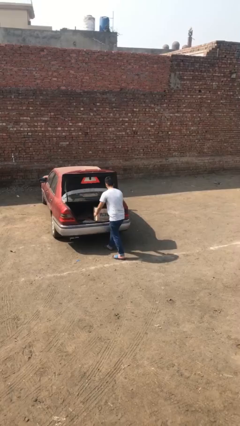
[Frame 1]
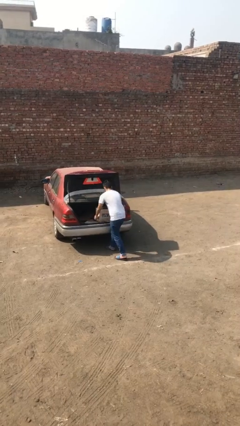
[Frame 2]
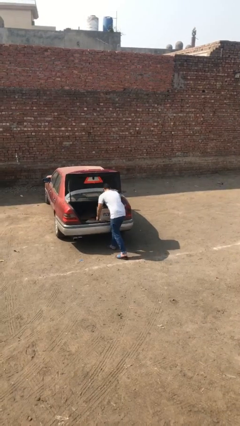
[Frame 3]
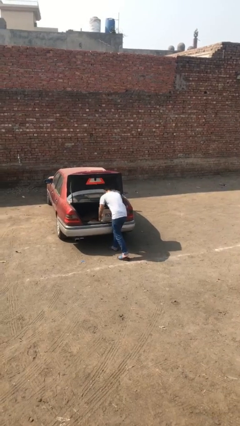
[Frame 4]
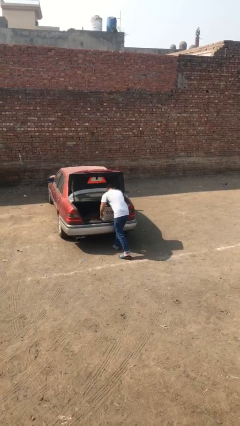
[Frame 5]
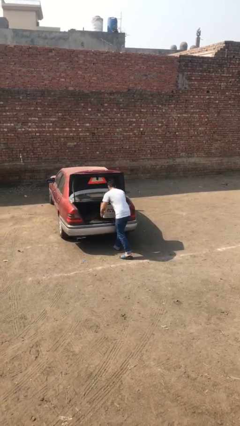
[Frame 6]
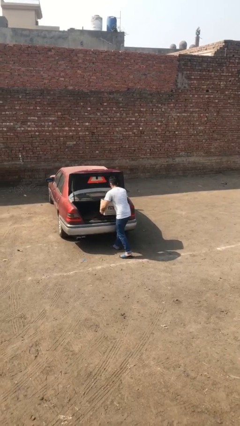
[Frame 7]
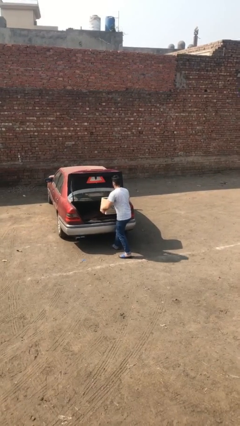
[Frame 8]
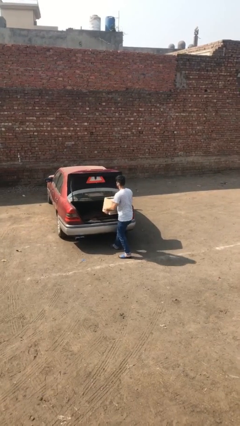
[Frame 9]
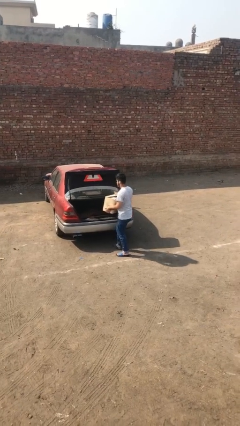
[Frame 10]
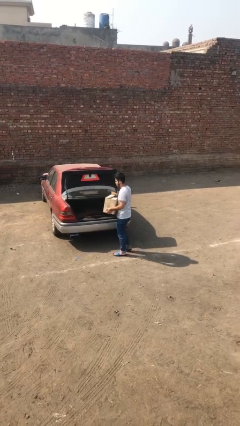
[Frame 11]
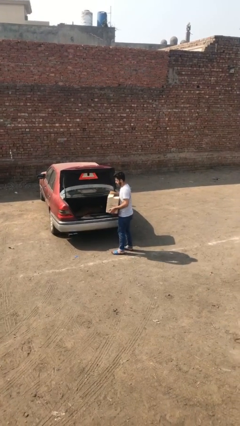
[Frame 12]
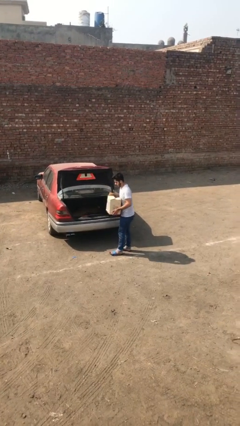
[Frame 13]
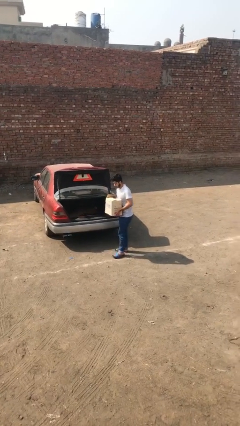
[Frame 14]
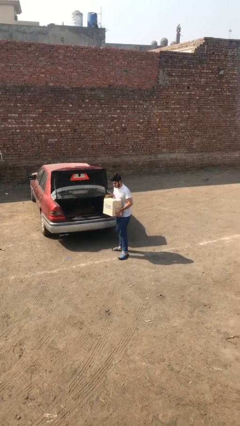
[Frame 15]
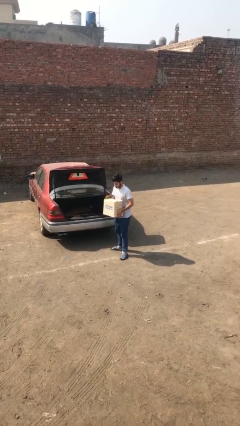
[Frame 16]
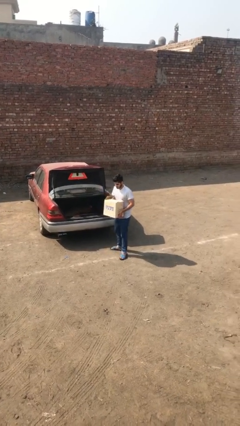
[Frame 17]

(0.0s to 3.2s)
person unloads car

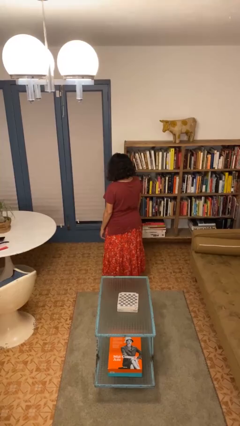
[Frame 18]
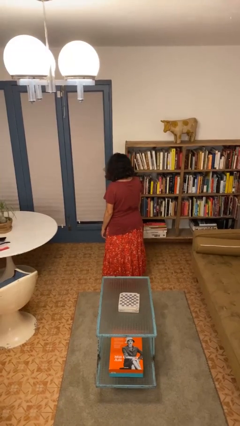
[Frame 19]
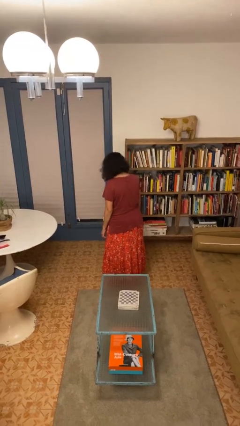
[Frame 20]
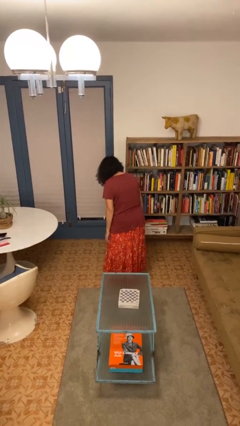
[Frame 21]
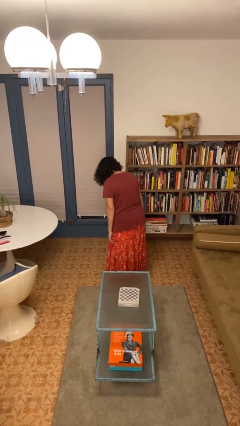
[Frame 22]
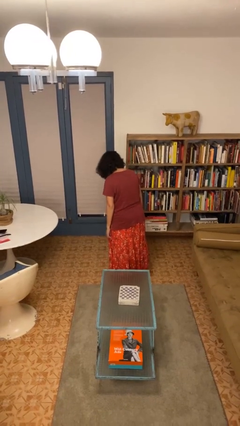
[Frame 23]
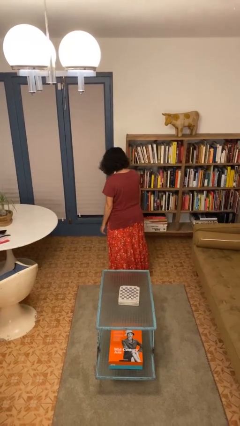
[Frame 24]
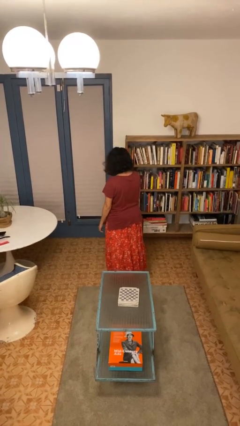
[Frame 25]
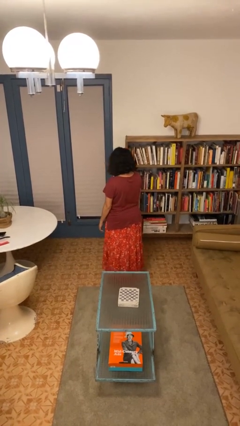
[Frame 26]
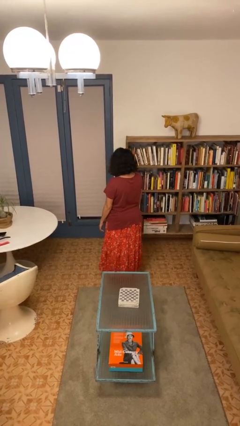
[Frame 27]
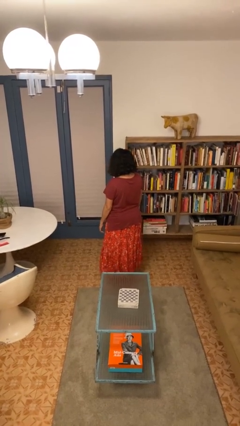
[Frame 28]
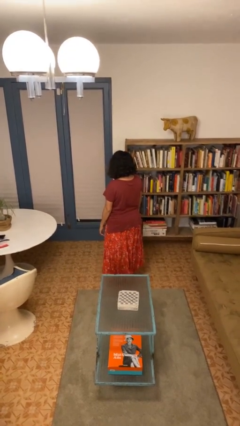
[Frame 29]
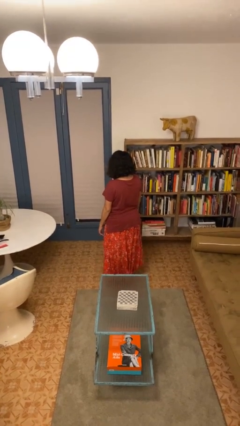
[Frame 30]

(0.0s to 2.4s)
person bows

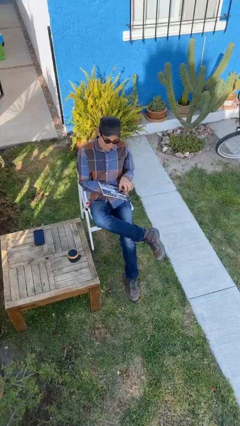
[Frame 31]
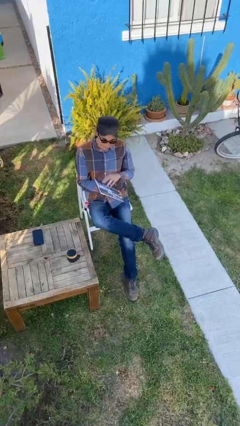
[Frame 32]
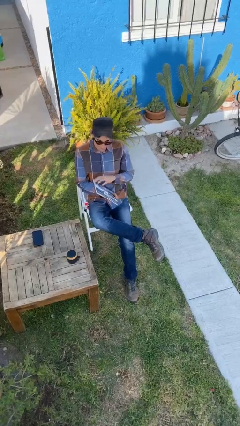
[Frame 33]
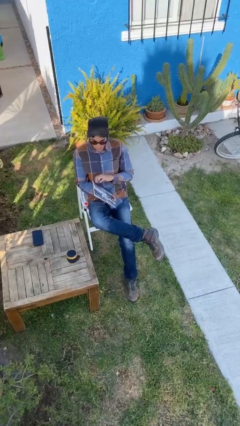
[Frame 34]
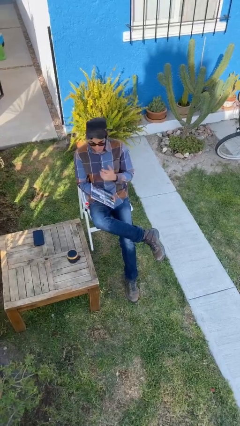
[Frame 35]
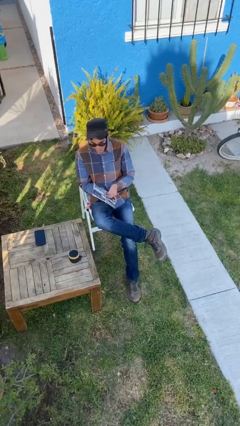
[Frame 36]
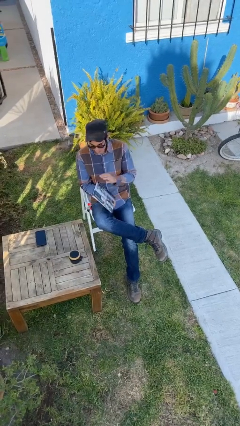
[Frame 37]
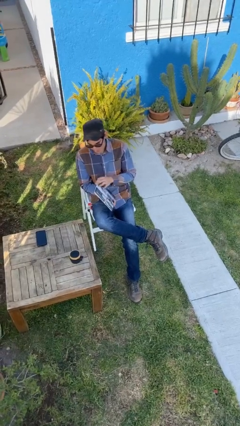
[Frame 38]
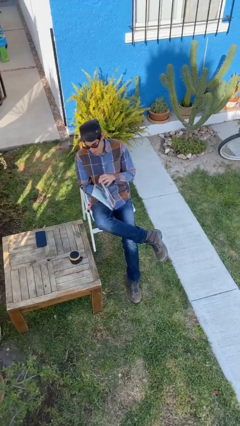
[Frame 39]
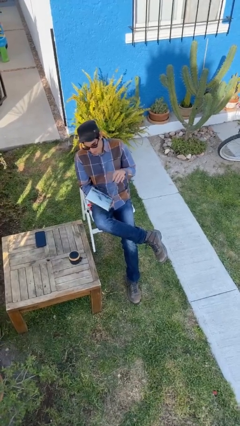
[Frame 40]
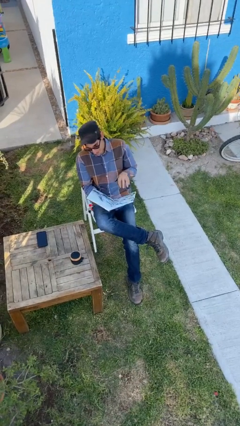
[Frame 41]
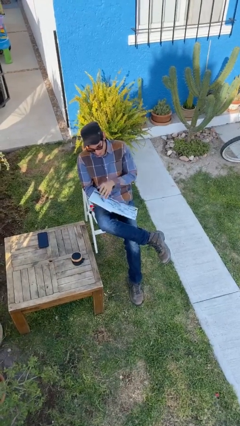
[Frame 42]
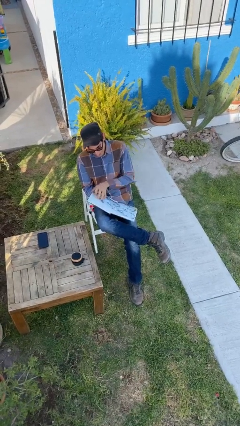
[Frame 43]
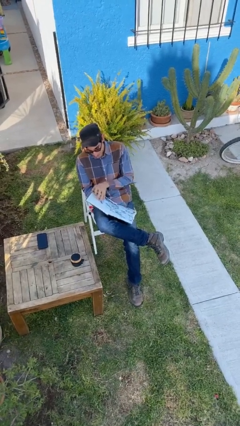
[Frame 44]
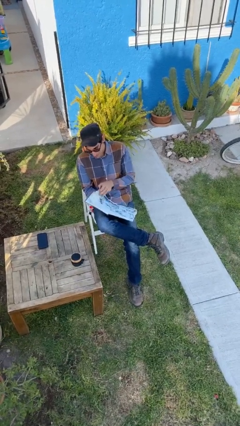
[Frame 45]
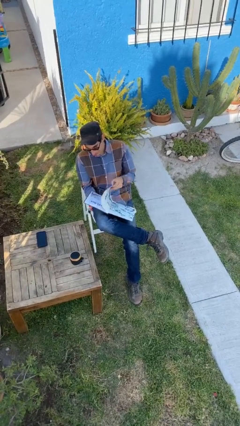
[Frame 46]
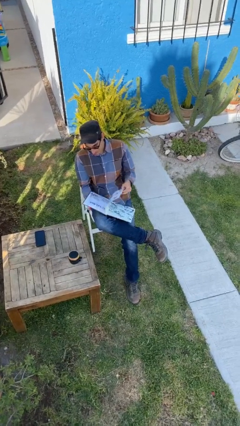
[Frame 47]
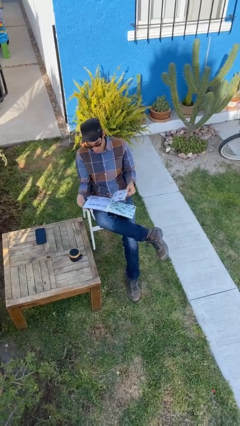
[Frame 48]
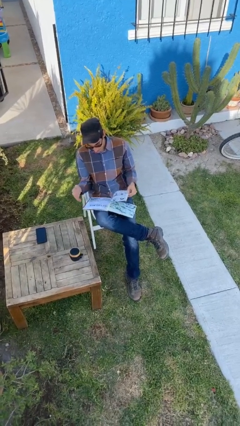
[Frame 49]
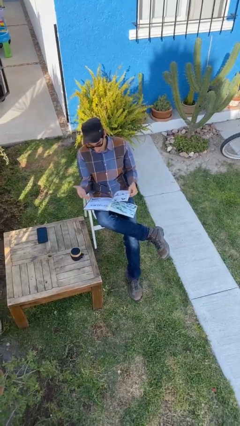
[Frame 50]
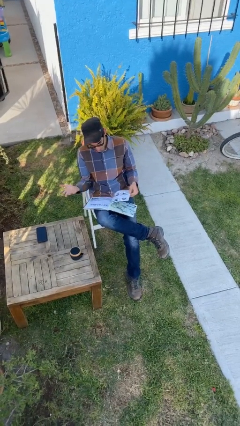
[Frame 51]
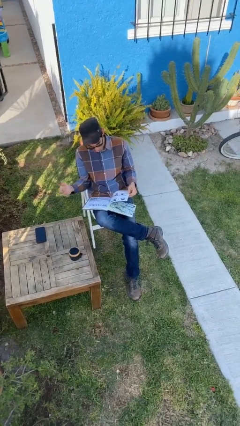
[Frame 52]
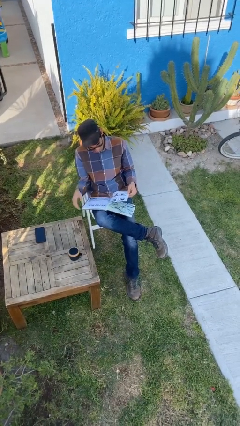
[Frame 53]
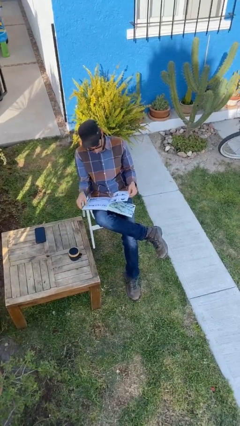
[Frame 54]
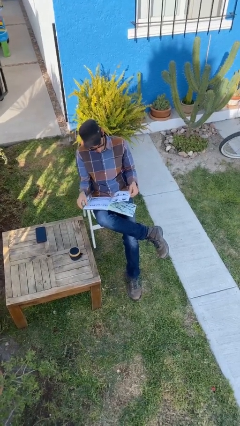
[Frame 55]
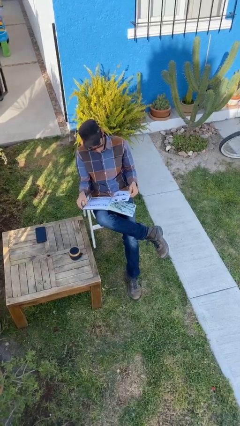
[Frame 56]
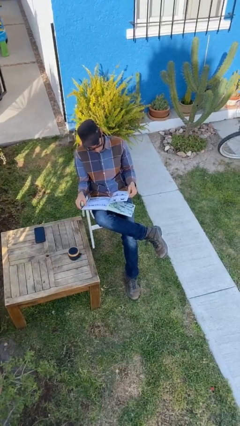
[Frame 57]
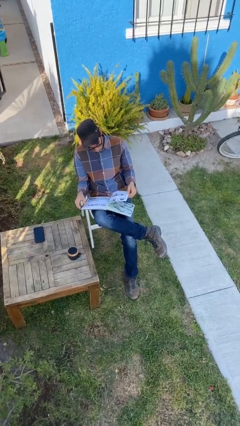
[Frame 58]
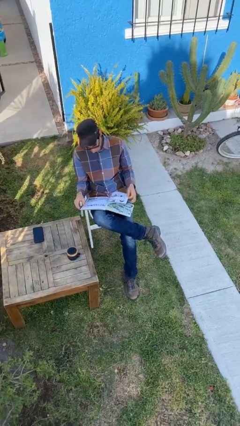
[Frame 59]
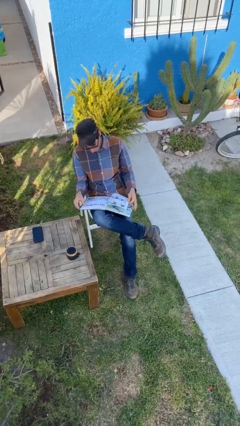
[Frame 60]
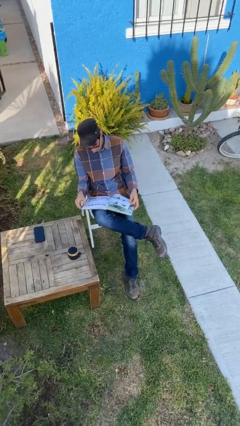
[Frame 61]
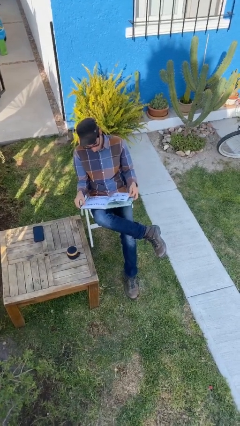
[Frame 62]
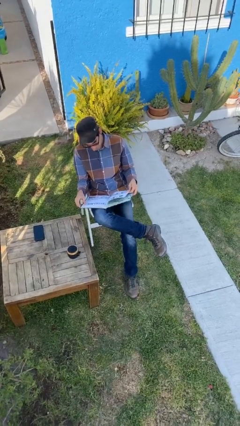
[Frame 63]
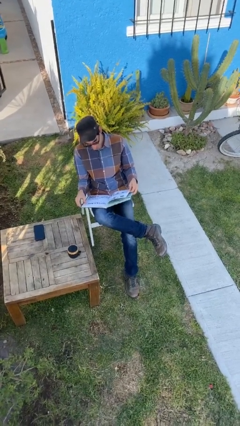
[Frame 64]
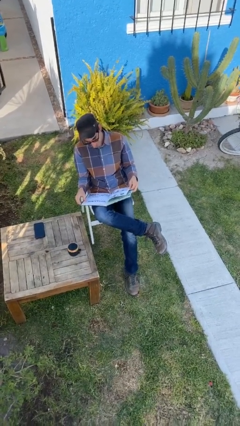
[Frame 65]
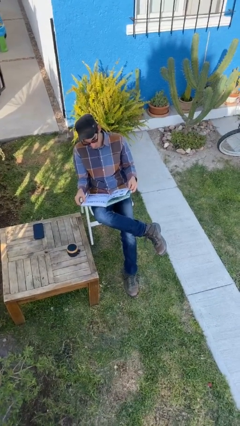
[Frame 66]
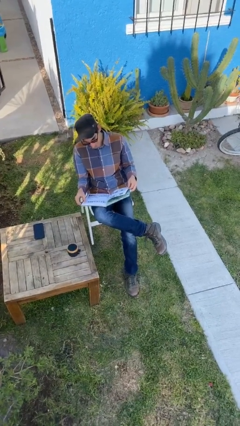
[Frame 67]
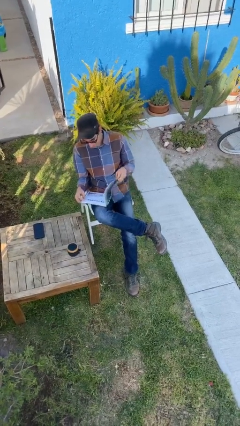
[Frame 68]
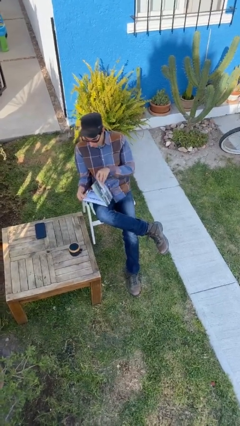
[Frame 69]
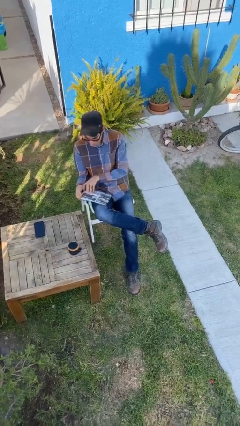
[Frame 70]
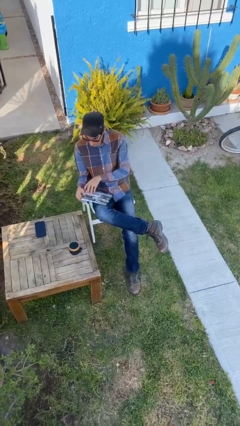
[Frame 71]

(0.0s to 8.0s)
person reads document

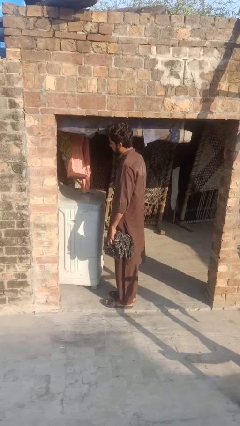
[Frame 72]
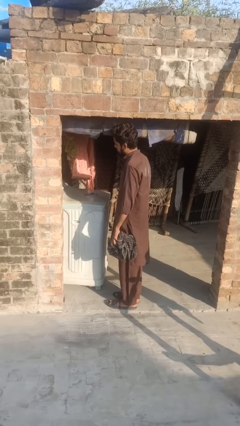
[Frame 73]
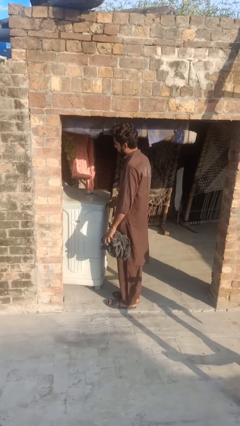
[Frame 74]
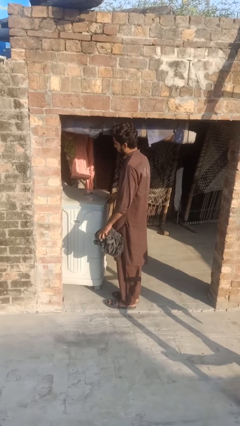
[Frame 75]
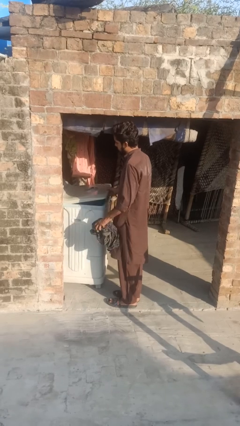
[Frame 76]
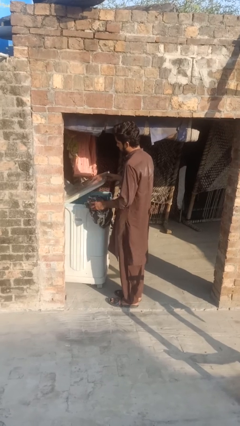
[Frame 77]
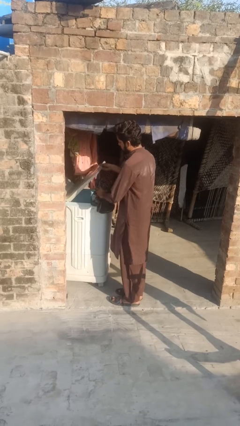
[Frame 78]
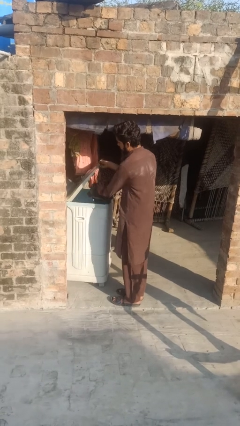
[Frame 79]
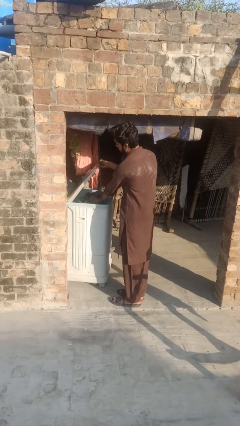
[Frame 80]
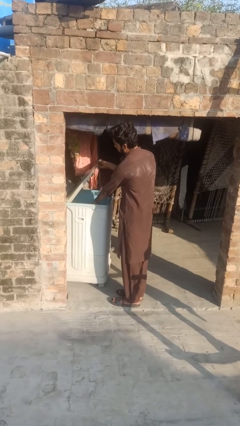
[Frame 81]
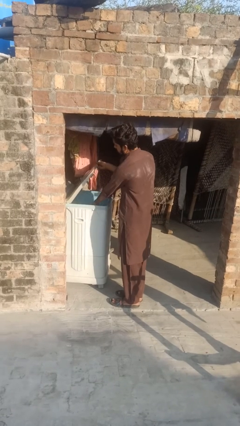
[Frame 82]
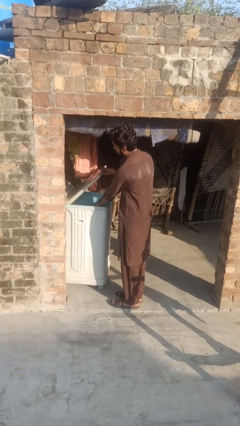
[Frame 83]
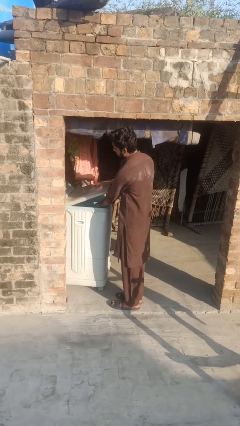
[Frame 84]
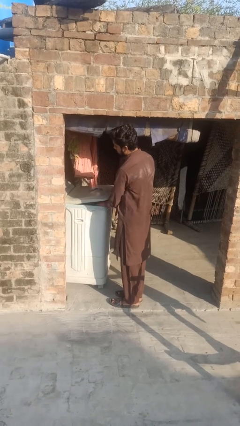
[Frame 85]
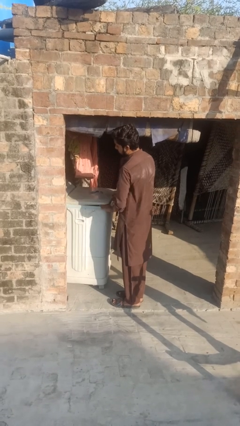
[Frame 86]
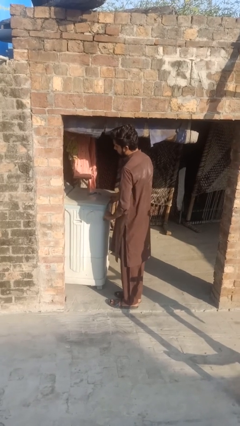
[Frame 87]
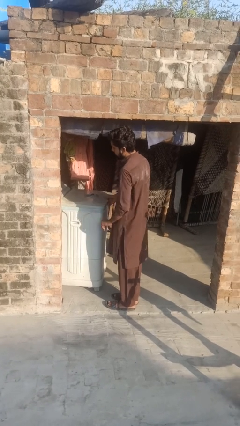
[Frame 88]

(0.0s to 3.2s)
person loads dryer

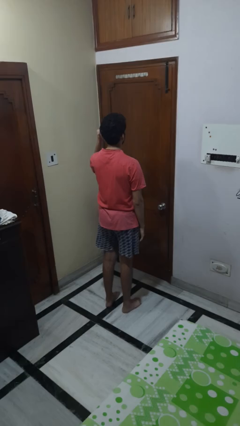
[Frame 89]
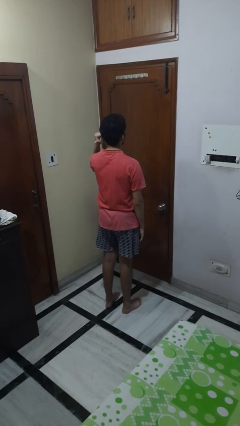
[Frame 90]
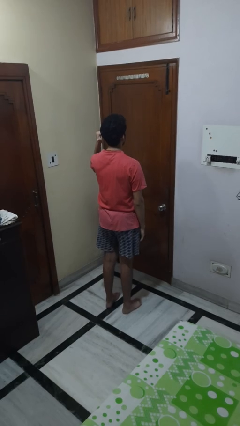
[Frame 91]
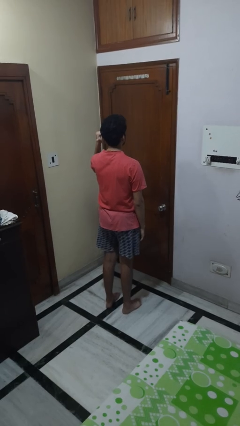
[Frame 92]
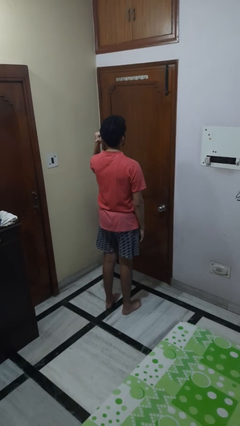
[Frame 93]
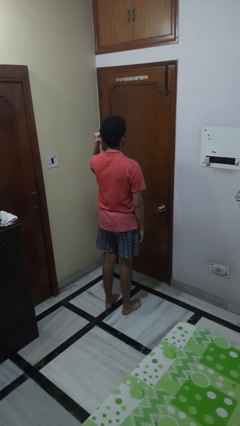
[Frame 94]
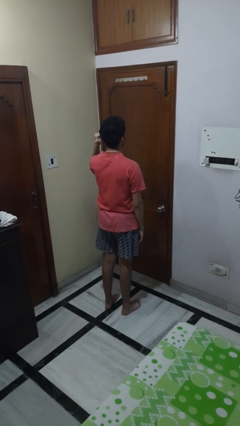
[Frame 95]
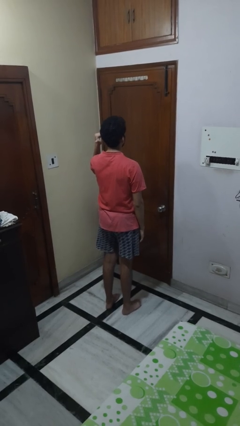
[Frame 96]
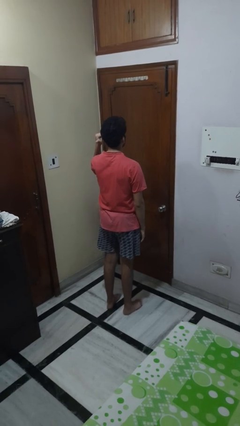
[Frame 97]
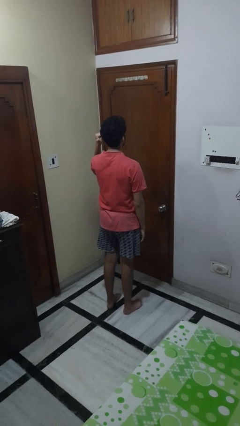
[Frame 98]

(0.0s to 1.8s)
person gestures behind me
